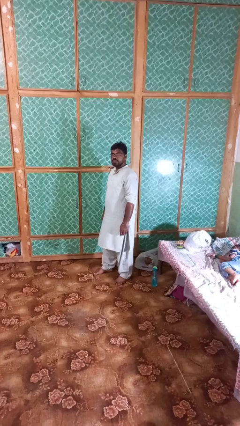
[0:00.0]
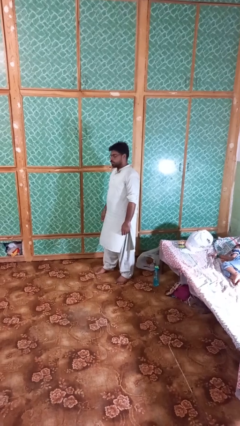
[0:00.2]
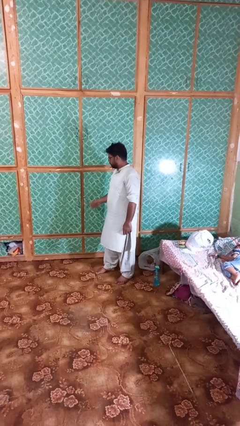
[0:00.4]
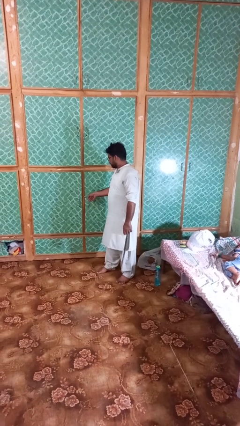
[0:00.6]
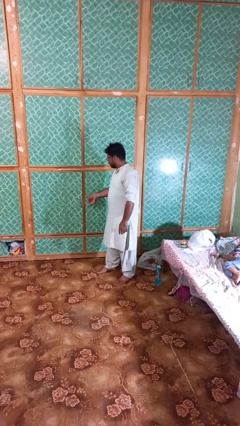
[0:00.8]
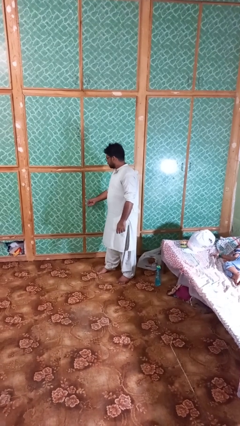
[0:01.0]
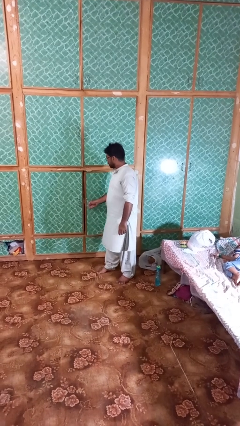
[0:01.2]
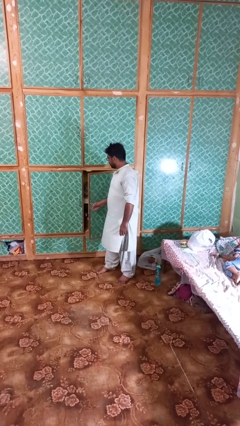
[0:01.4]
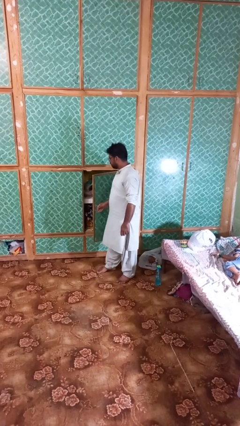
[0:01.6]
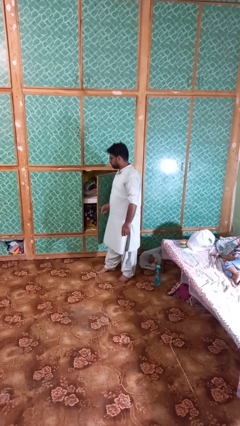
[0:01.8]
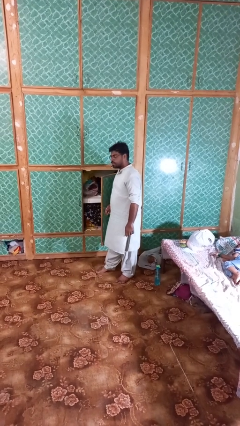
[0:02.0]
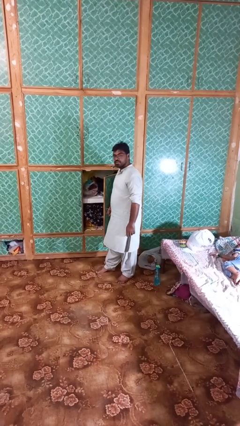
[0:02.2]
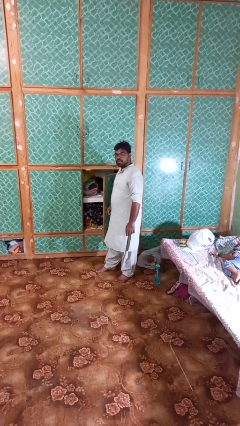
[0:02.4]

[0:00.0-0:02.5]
person opens closet door

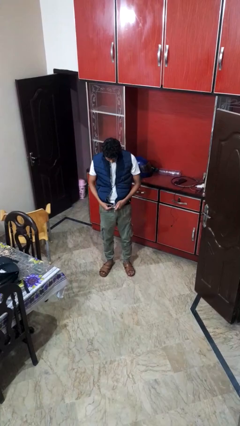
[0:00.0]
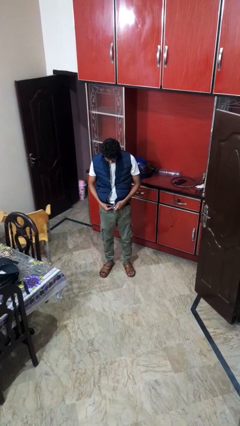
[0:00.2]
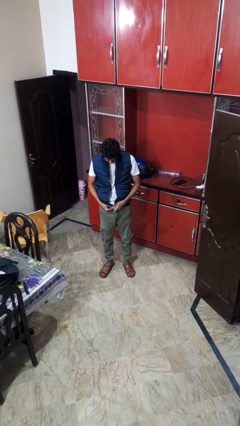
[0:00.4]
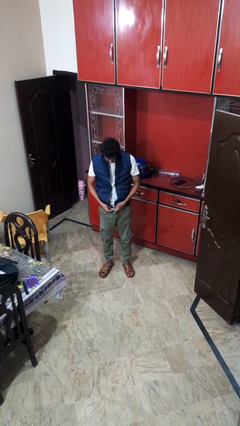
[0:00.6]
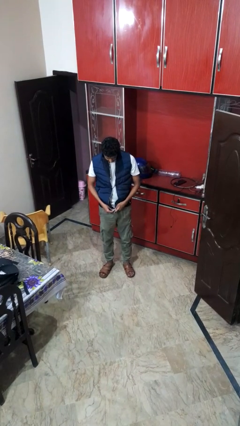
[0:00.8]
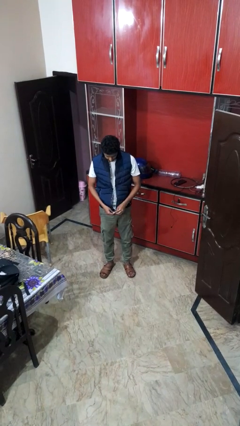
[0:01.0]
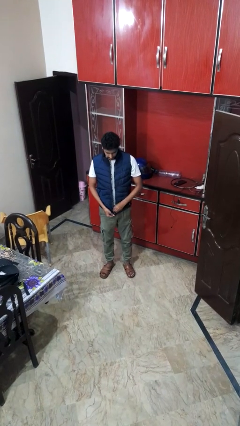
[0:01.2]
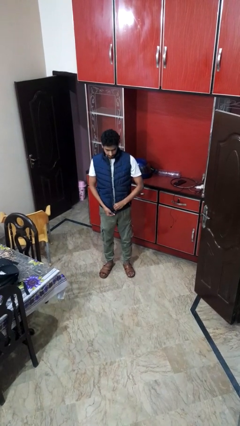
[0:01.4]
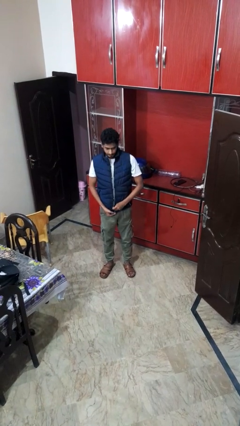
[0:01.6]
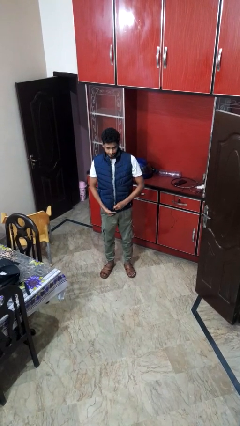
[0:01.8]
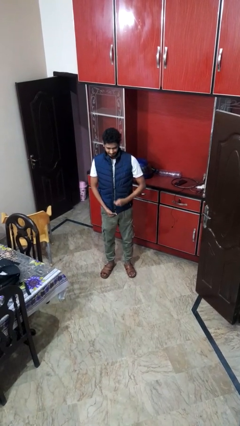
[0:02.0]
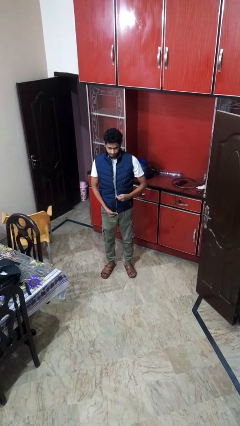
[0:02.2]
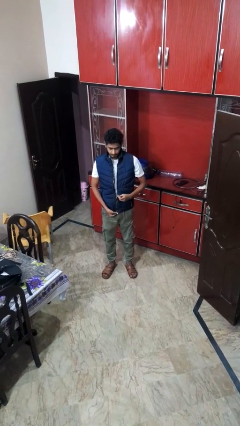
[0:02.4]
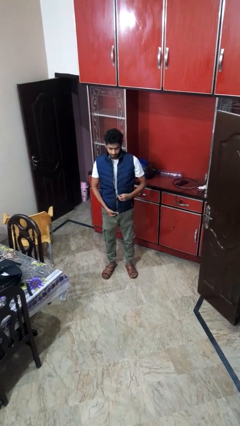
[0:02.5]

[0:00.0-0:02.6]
person zips up jacket

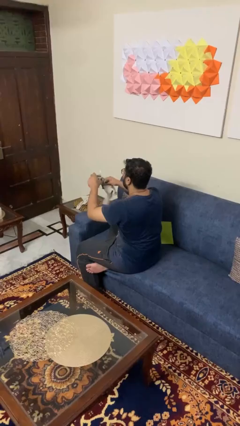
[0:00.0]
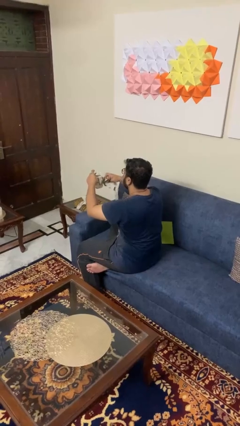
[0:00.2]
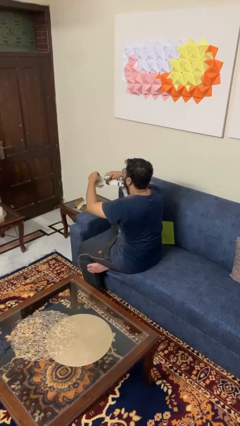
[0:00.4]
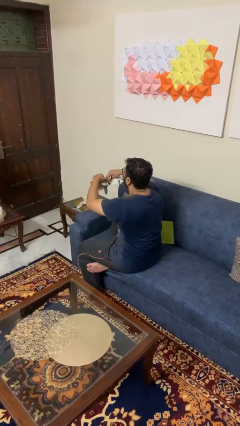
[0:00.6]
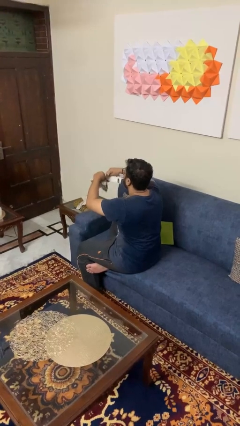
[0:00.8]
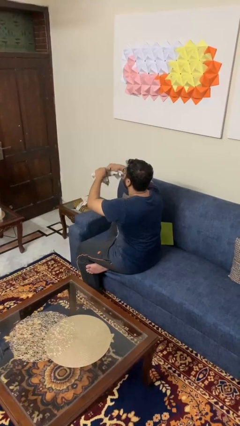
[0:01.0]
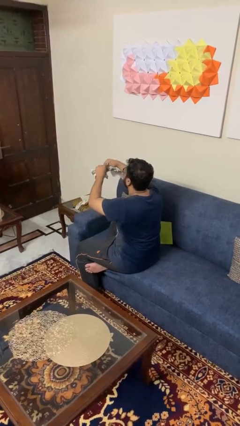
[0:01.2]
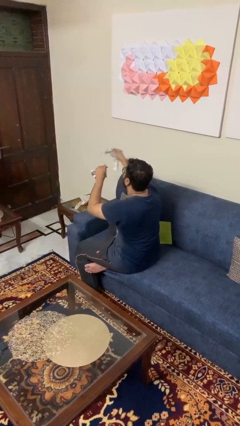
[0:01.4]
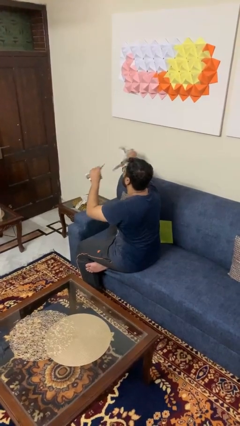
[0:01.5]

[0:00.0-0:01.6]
person tears paper

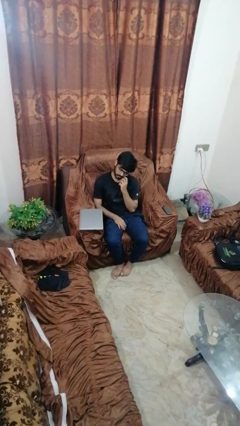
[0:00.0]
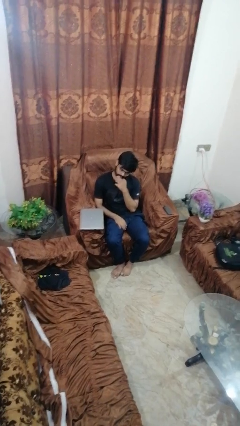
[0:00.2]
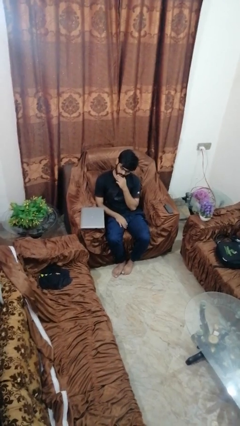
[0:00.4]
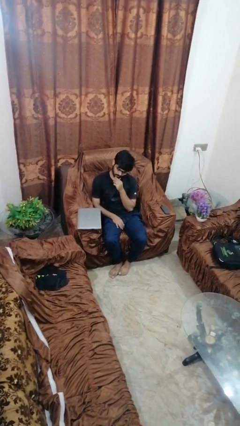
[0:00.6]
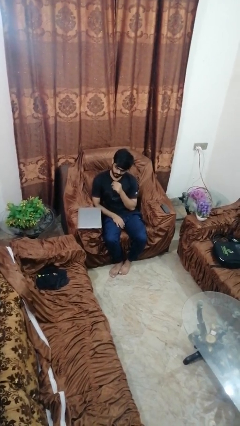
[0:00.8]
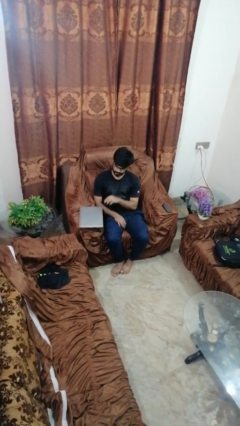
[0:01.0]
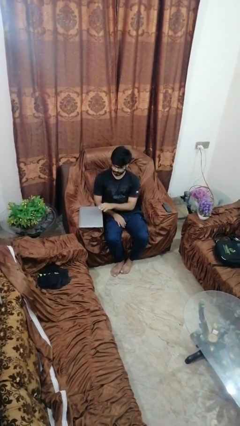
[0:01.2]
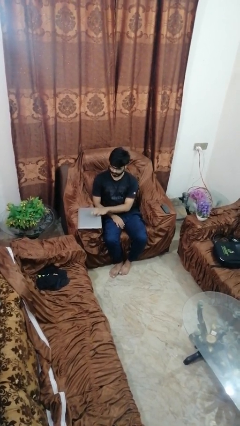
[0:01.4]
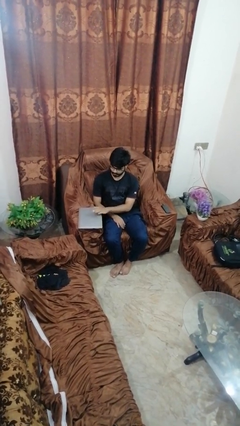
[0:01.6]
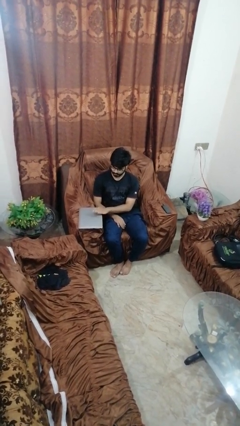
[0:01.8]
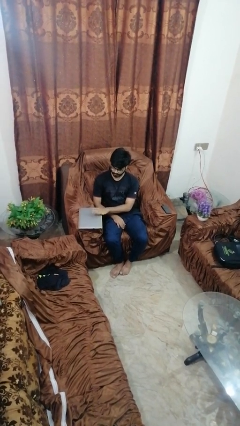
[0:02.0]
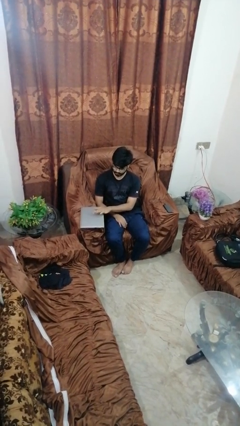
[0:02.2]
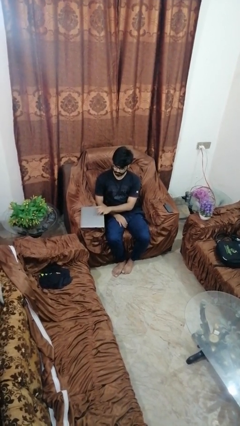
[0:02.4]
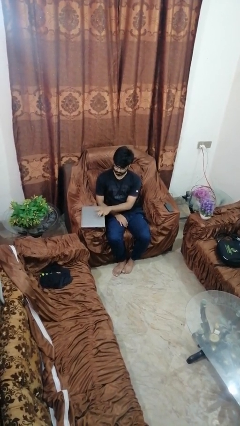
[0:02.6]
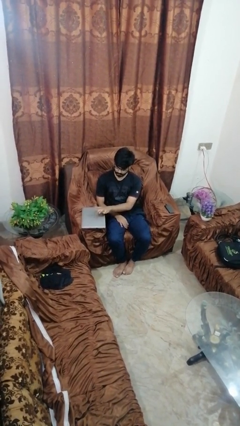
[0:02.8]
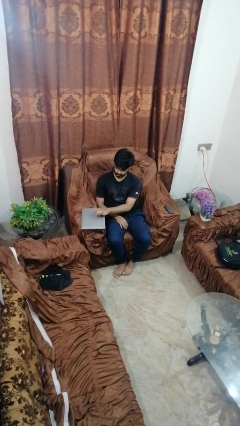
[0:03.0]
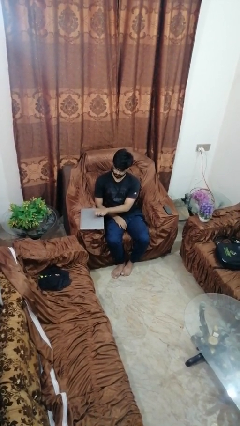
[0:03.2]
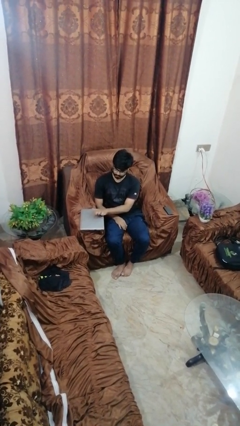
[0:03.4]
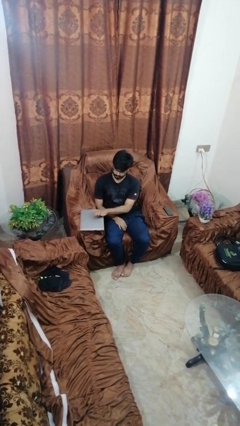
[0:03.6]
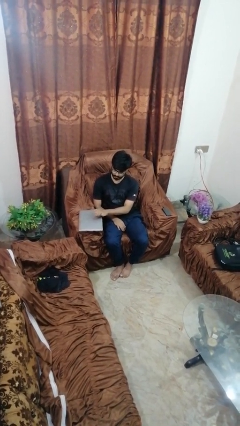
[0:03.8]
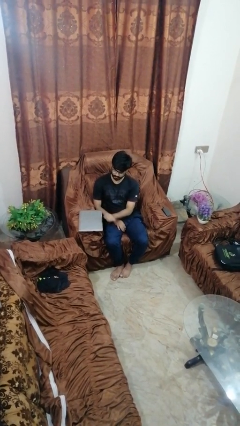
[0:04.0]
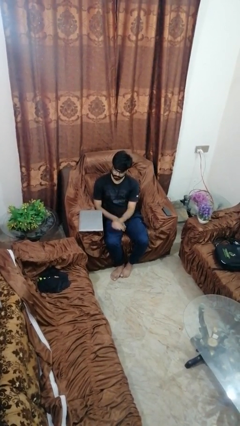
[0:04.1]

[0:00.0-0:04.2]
person taps object with finger

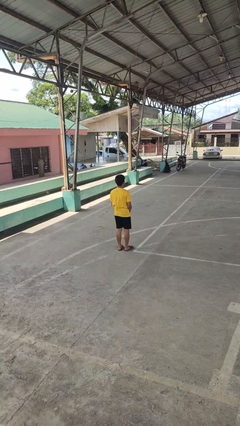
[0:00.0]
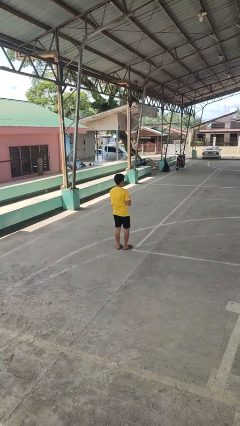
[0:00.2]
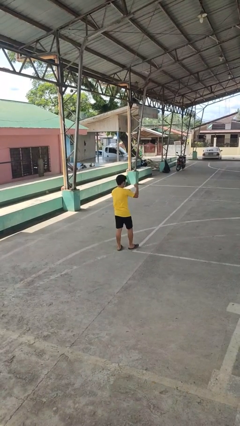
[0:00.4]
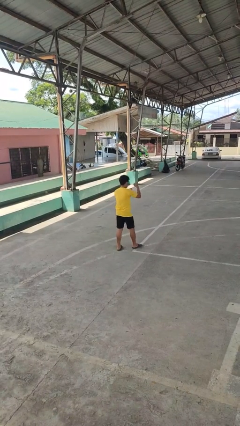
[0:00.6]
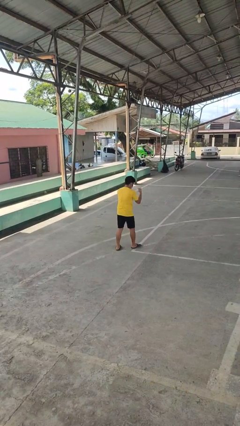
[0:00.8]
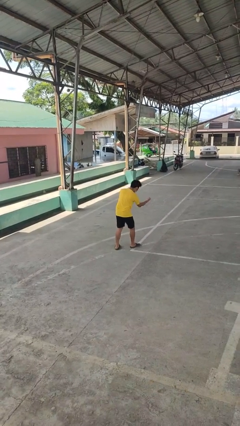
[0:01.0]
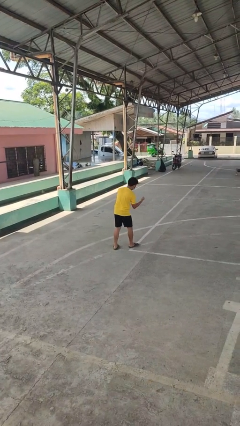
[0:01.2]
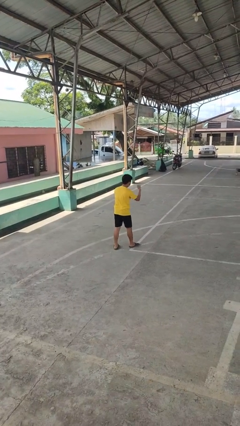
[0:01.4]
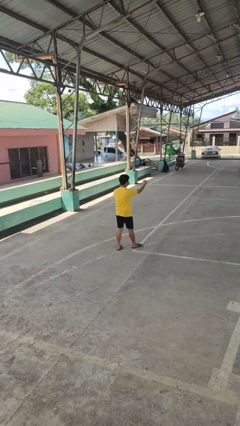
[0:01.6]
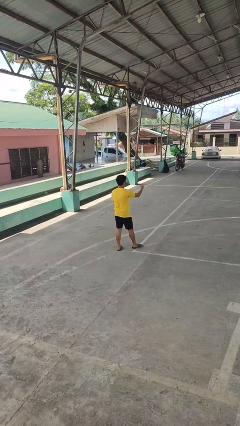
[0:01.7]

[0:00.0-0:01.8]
person punches

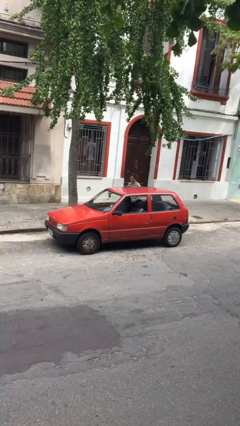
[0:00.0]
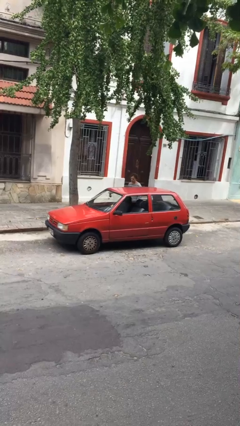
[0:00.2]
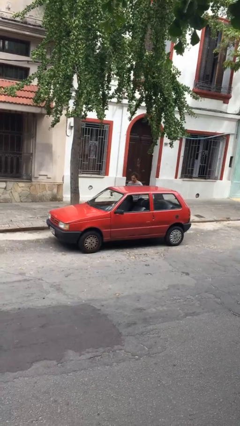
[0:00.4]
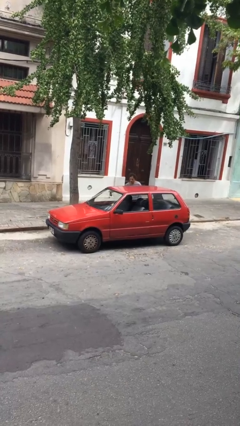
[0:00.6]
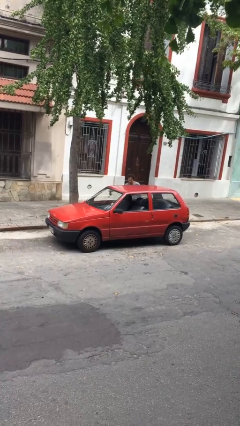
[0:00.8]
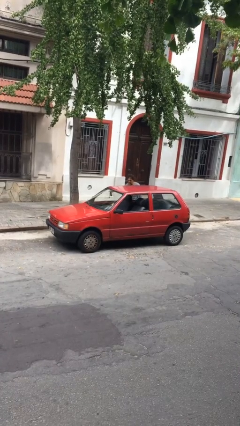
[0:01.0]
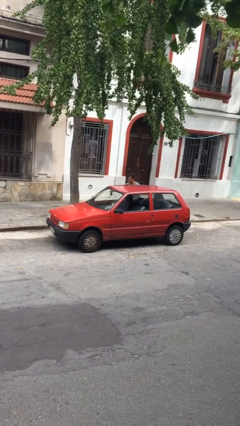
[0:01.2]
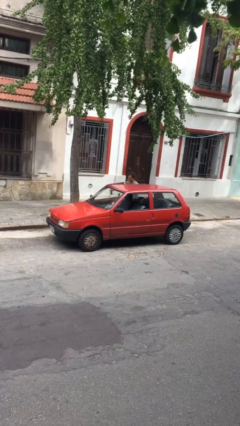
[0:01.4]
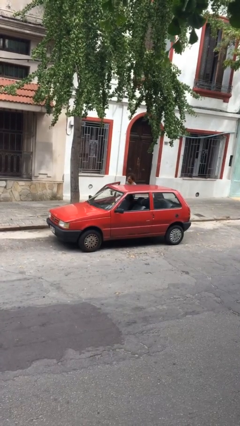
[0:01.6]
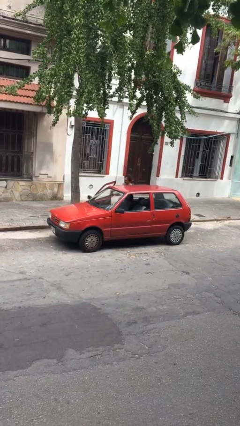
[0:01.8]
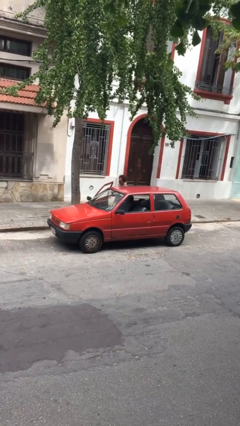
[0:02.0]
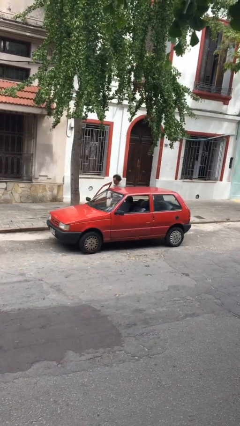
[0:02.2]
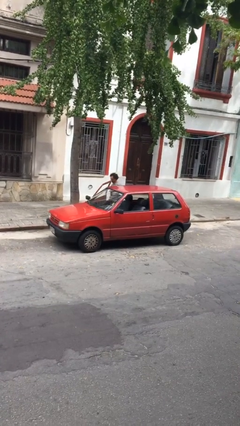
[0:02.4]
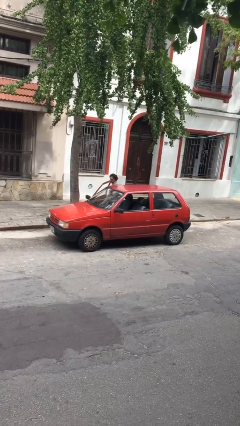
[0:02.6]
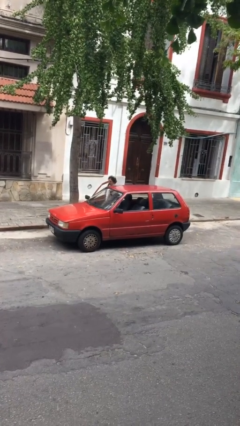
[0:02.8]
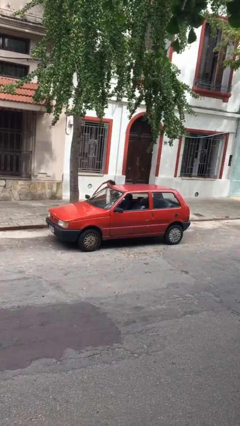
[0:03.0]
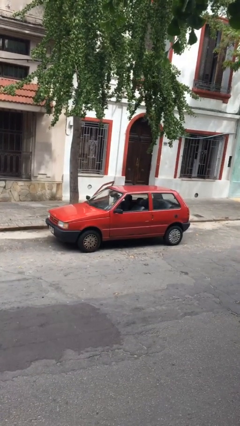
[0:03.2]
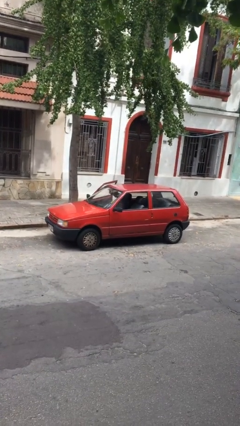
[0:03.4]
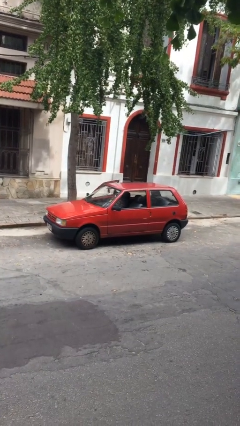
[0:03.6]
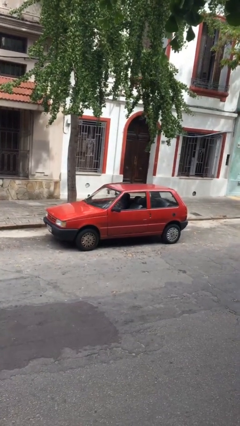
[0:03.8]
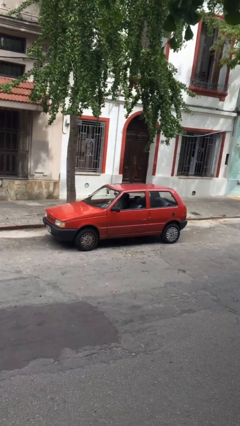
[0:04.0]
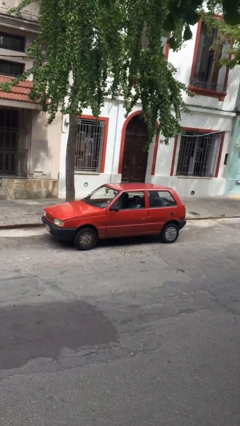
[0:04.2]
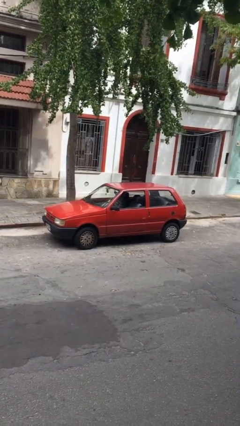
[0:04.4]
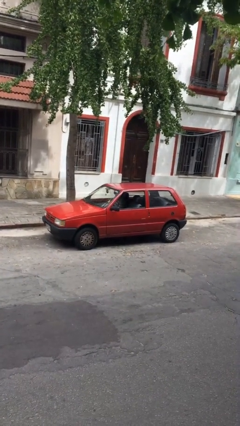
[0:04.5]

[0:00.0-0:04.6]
car picks up person
